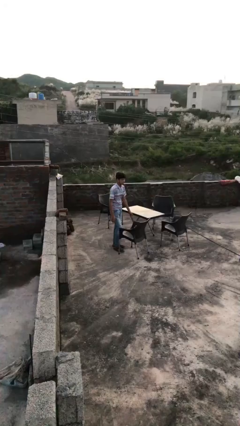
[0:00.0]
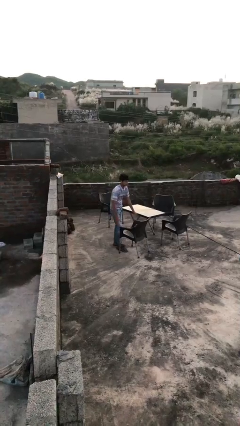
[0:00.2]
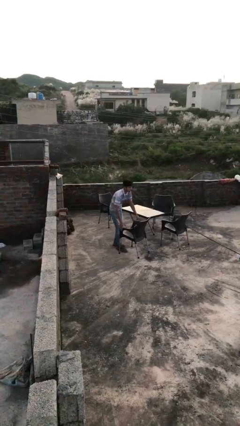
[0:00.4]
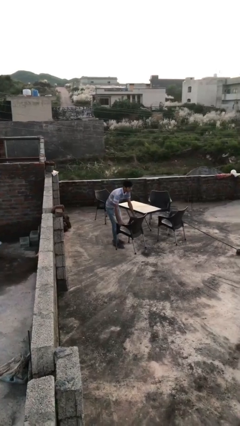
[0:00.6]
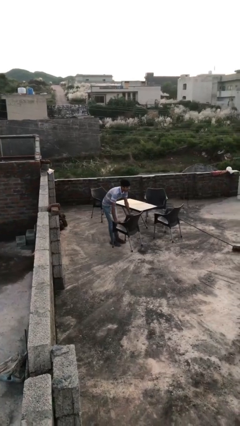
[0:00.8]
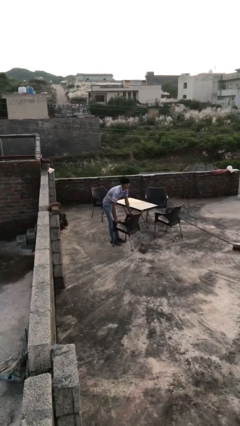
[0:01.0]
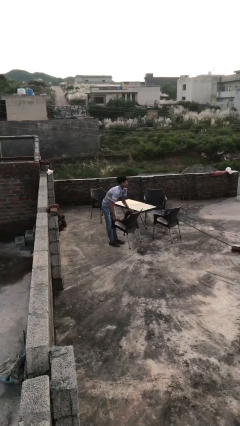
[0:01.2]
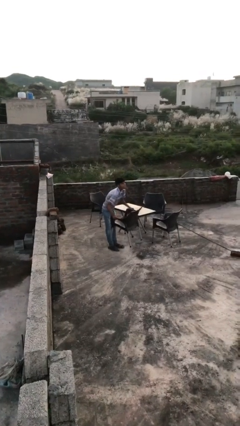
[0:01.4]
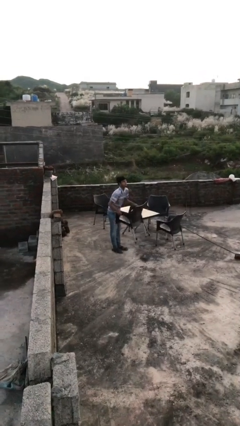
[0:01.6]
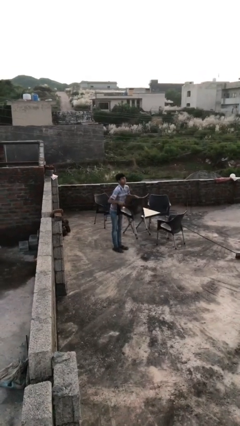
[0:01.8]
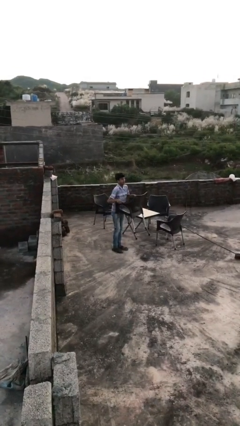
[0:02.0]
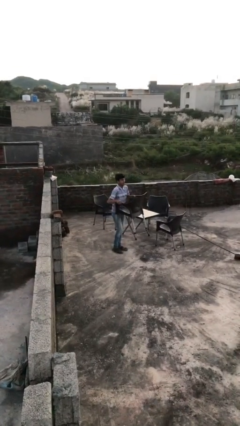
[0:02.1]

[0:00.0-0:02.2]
person picks up object from floor

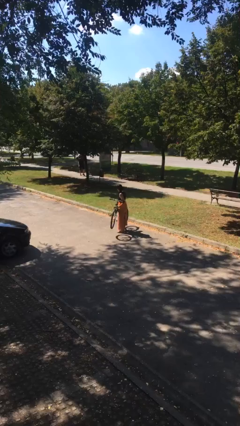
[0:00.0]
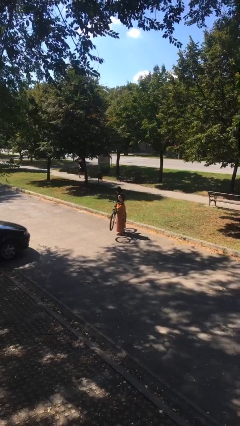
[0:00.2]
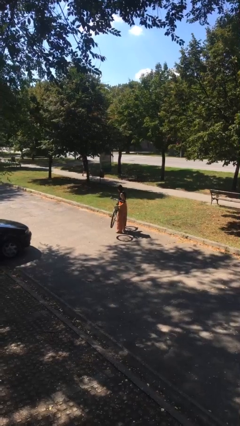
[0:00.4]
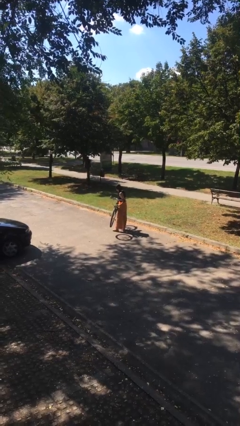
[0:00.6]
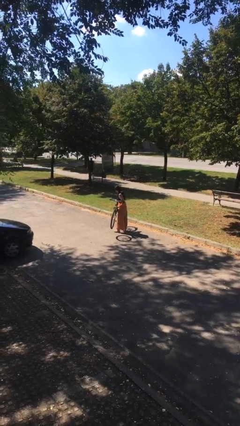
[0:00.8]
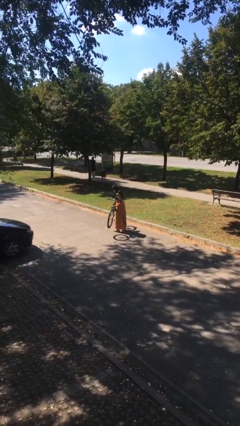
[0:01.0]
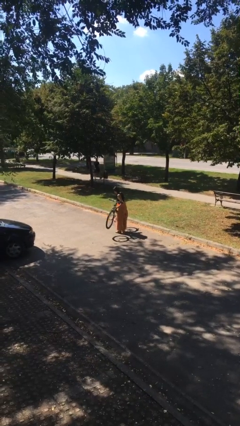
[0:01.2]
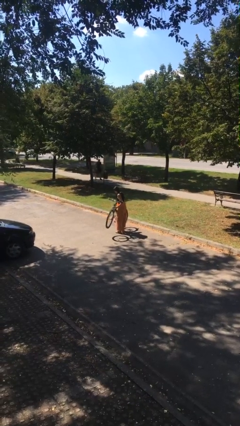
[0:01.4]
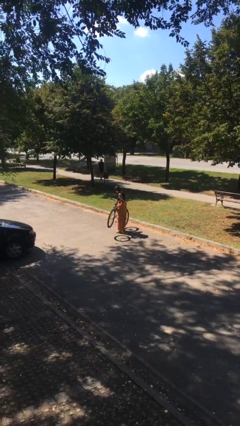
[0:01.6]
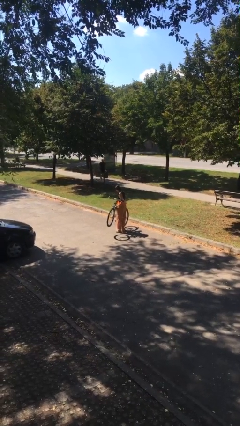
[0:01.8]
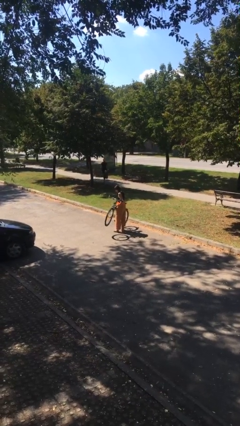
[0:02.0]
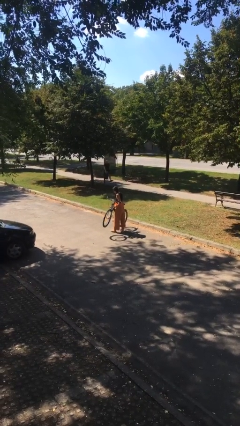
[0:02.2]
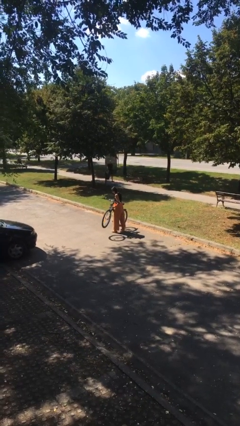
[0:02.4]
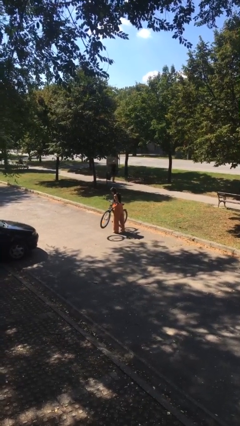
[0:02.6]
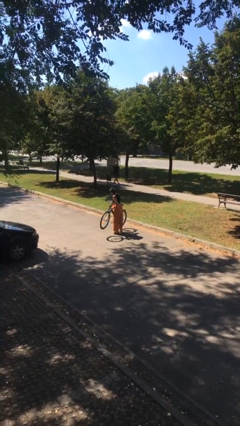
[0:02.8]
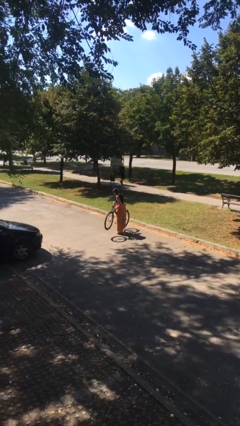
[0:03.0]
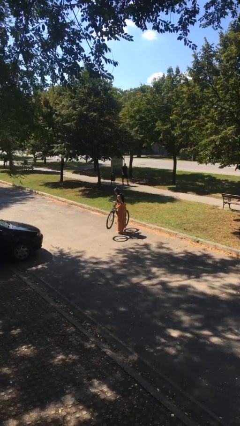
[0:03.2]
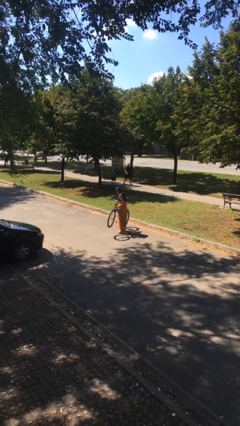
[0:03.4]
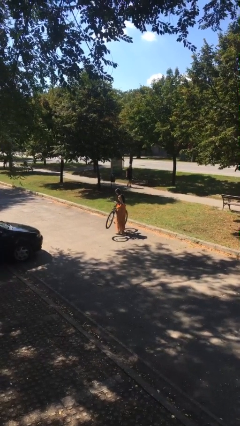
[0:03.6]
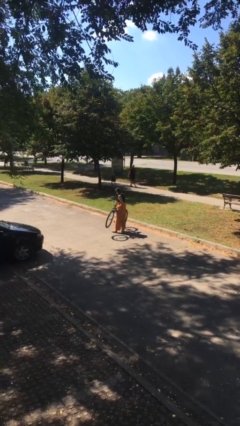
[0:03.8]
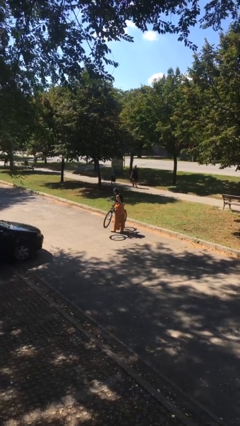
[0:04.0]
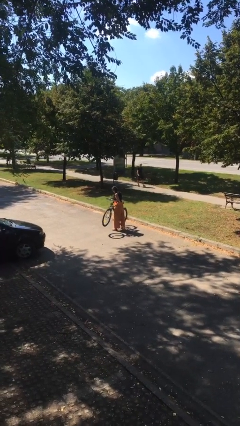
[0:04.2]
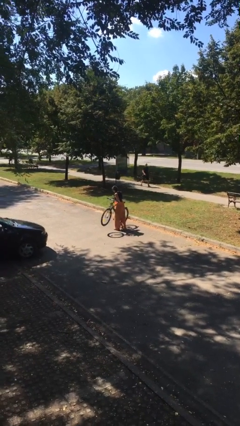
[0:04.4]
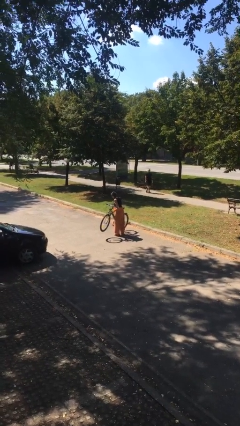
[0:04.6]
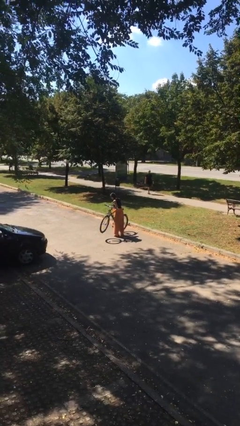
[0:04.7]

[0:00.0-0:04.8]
person carries heavy object

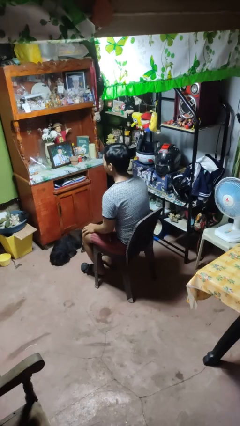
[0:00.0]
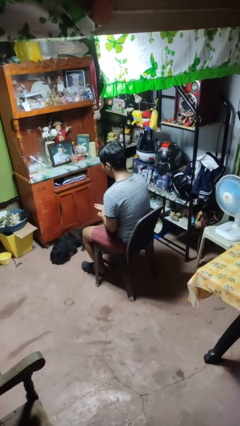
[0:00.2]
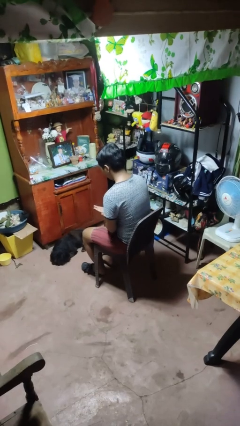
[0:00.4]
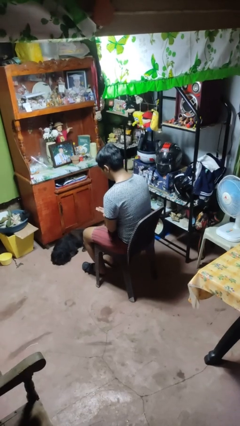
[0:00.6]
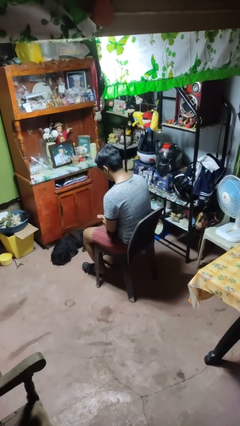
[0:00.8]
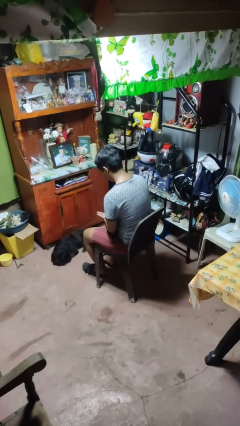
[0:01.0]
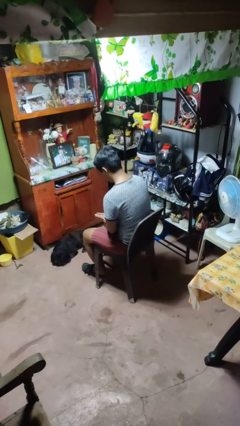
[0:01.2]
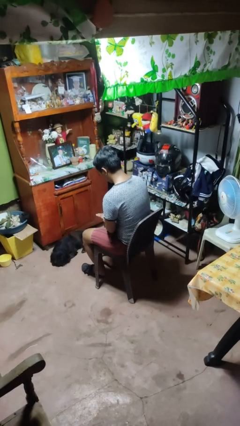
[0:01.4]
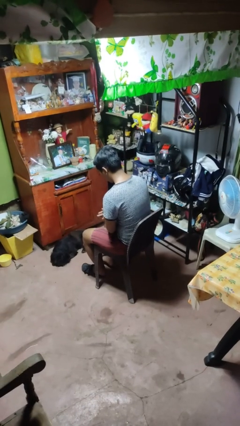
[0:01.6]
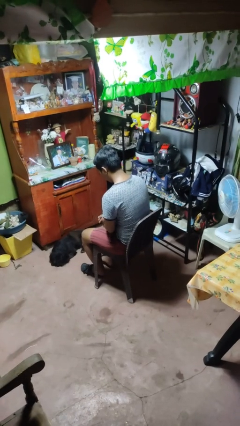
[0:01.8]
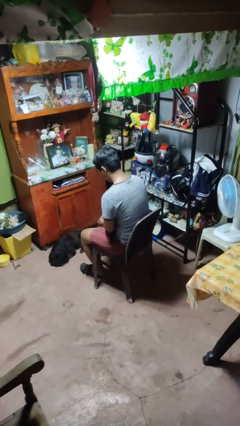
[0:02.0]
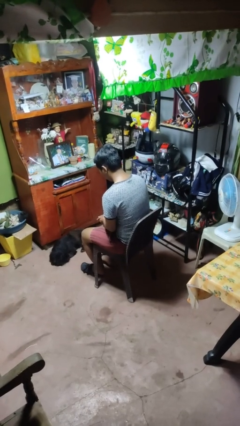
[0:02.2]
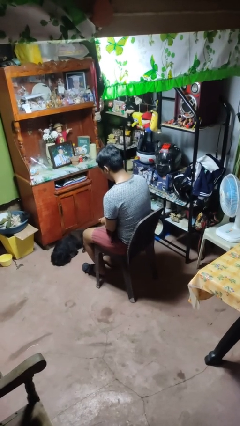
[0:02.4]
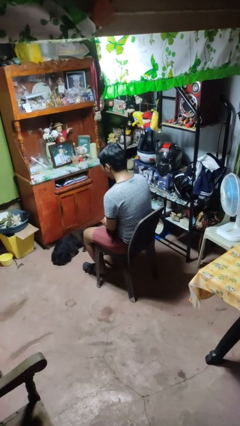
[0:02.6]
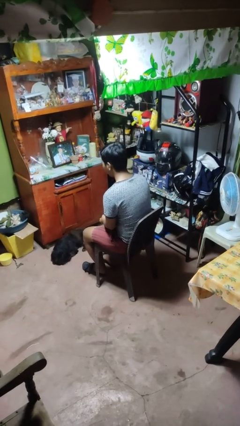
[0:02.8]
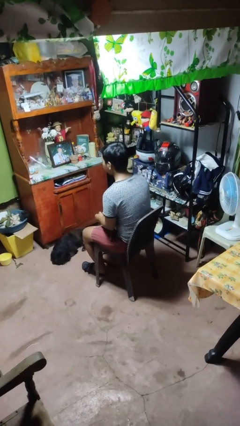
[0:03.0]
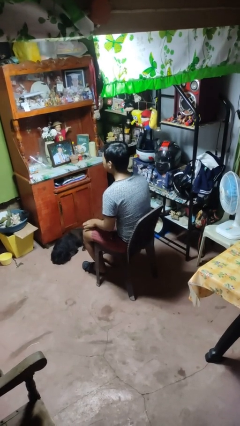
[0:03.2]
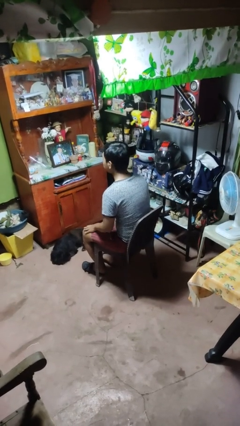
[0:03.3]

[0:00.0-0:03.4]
person looks at hands in lap

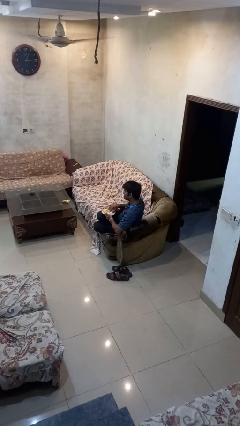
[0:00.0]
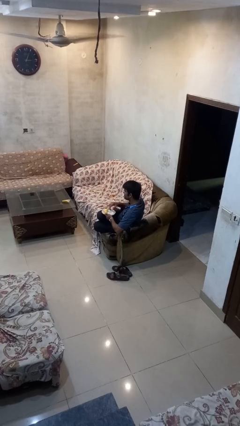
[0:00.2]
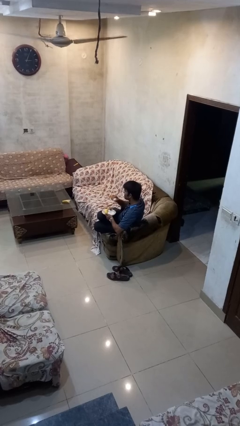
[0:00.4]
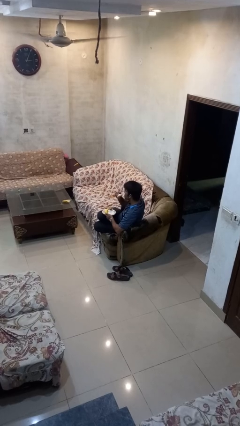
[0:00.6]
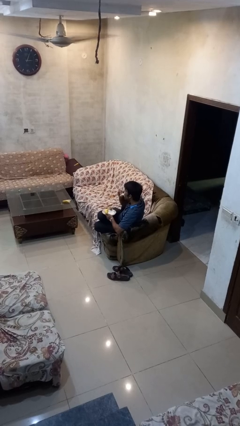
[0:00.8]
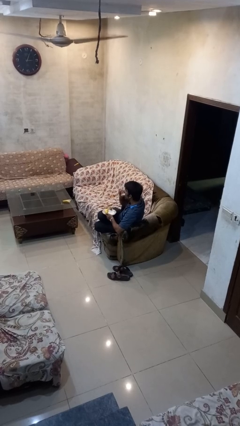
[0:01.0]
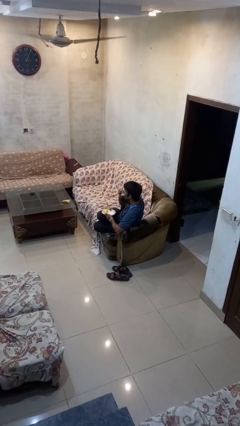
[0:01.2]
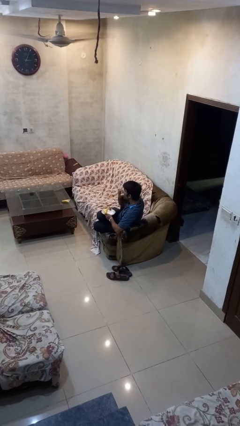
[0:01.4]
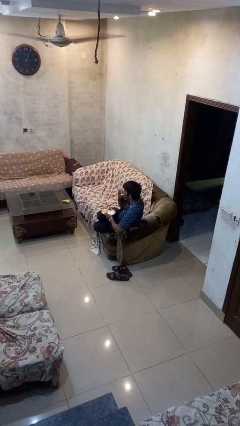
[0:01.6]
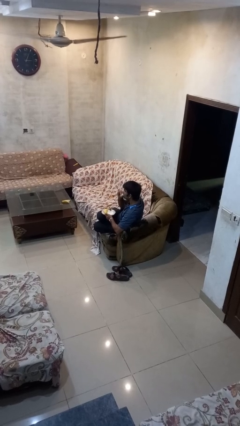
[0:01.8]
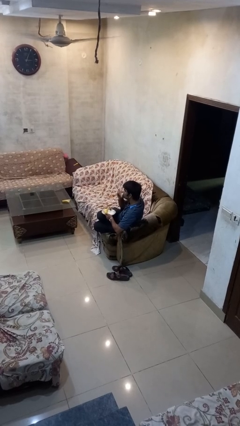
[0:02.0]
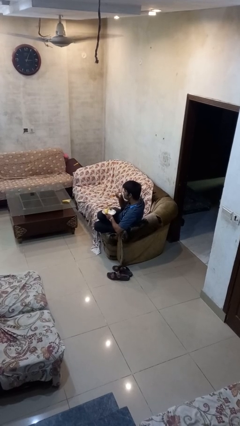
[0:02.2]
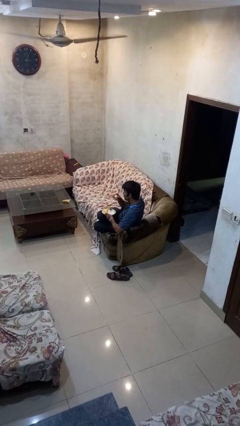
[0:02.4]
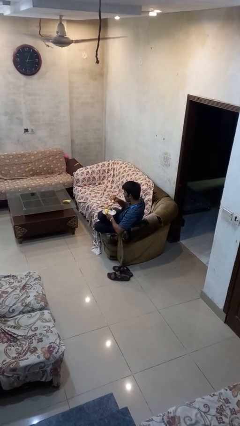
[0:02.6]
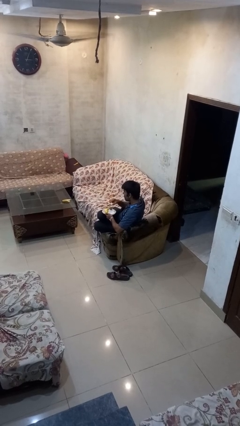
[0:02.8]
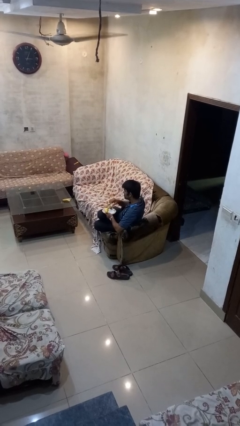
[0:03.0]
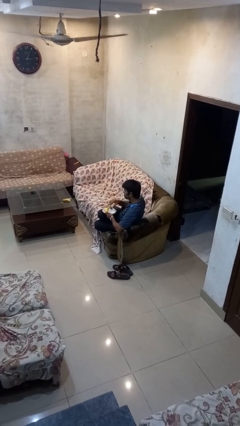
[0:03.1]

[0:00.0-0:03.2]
person eats with hands

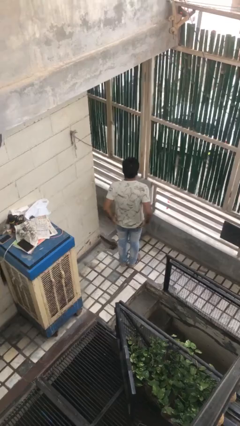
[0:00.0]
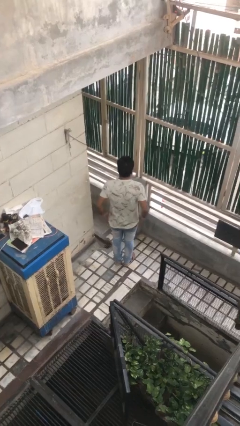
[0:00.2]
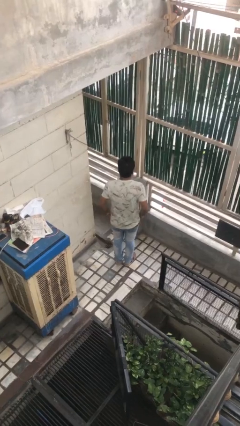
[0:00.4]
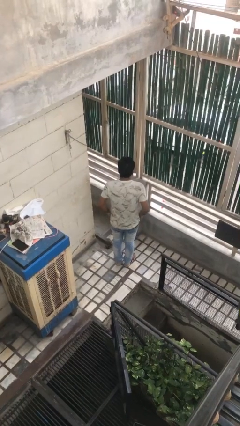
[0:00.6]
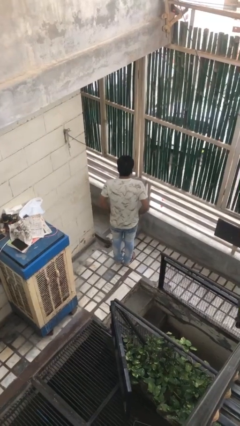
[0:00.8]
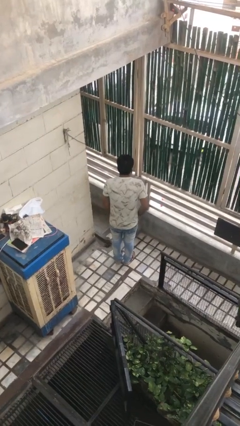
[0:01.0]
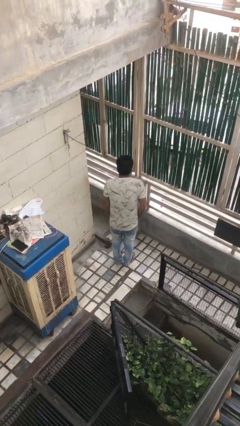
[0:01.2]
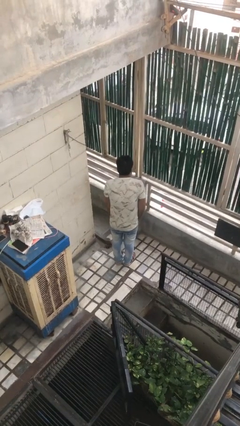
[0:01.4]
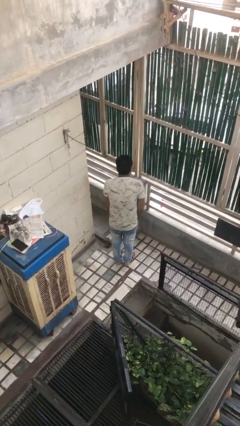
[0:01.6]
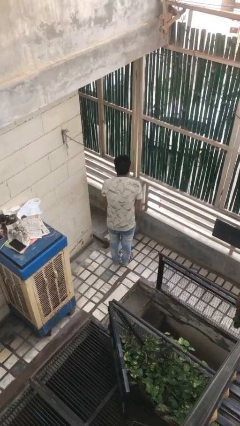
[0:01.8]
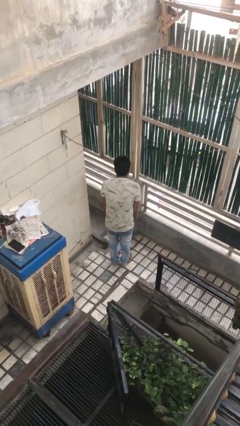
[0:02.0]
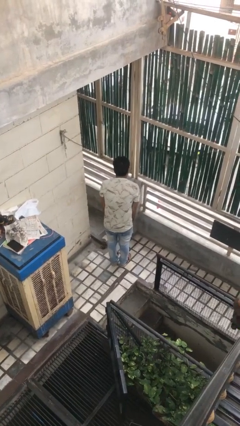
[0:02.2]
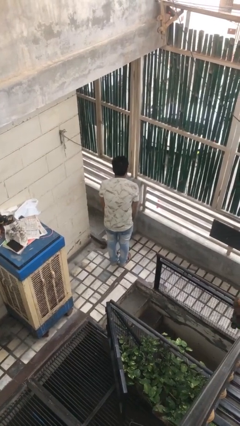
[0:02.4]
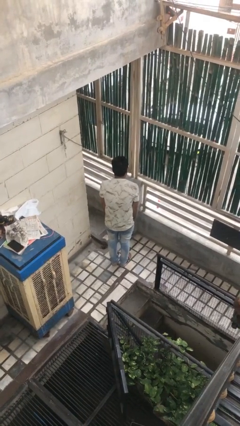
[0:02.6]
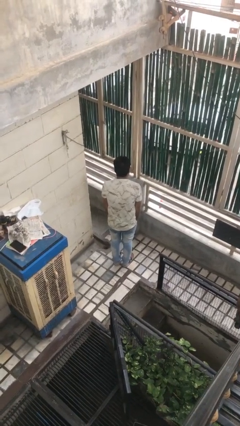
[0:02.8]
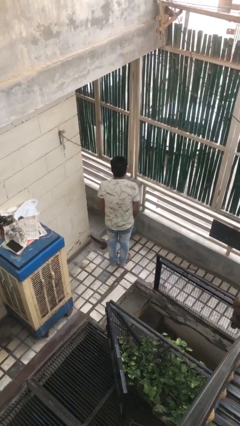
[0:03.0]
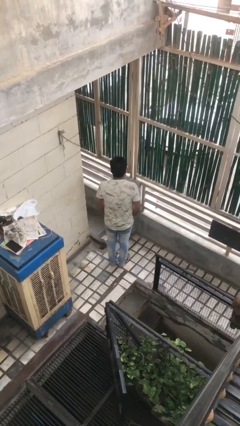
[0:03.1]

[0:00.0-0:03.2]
person puts hands in back pockets

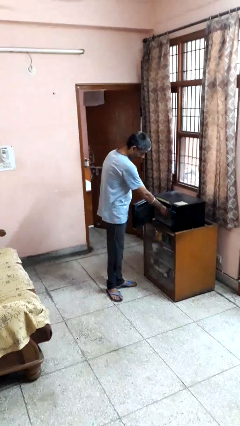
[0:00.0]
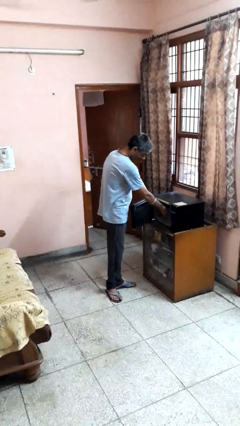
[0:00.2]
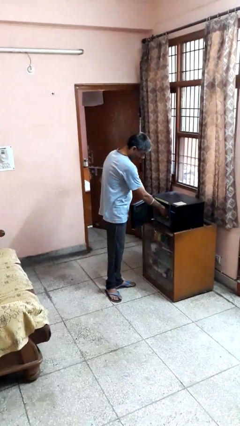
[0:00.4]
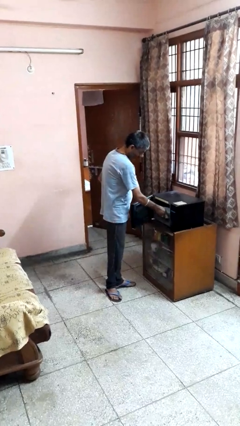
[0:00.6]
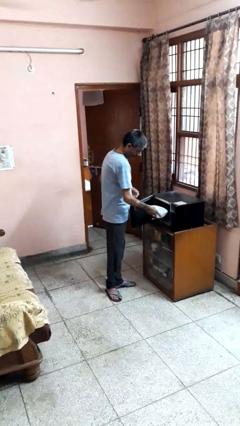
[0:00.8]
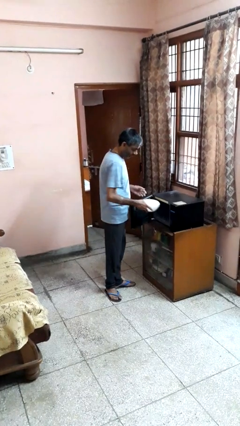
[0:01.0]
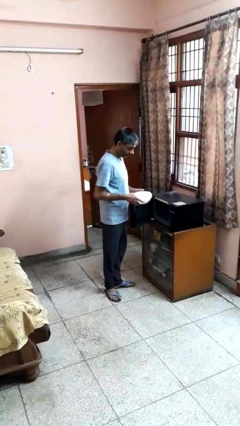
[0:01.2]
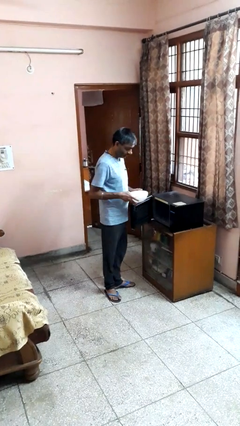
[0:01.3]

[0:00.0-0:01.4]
person takes object from microwave
